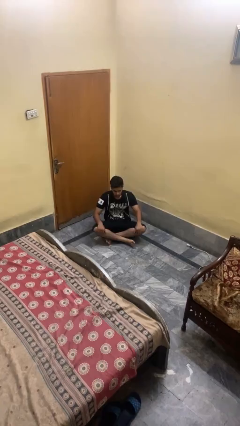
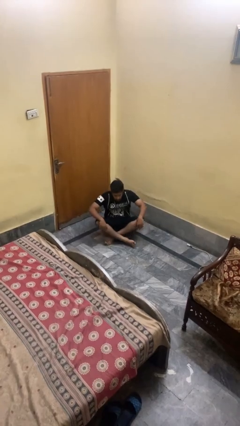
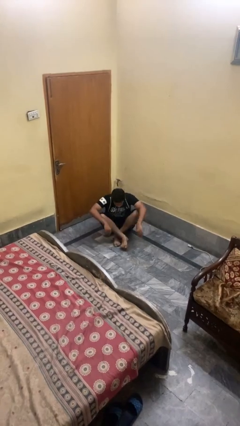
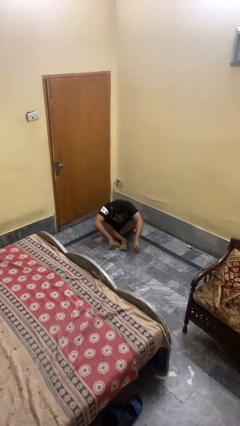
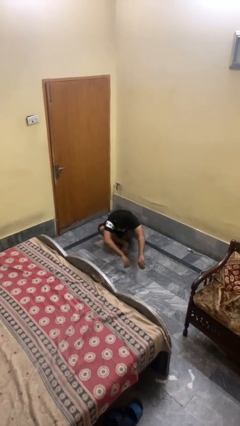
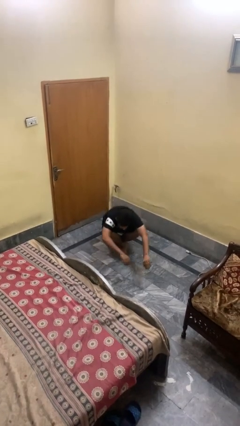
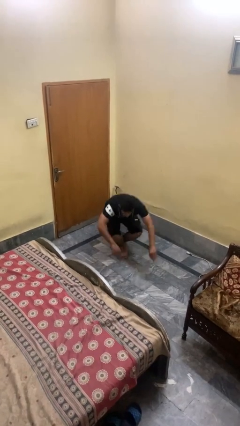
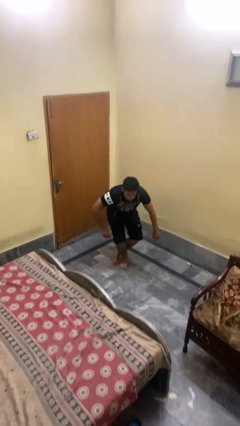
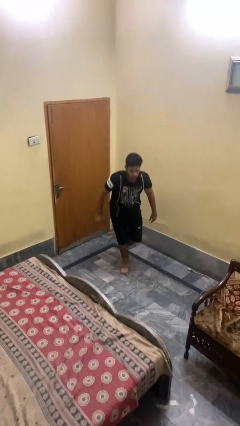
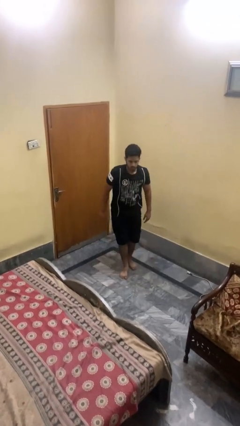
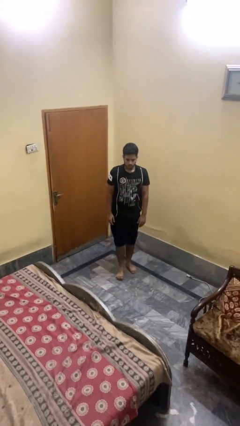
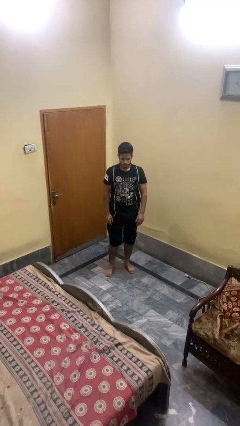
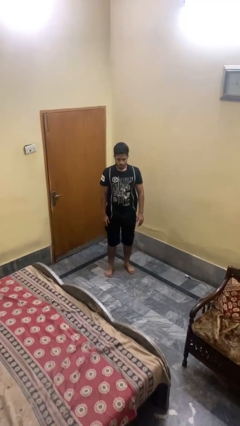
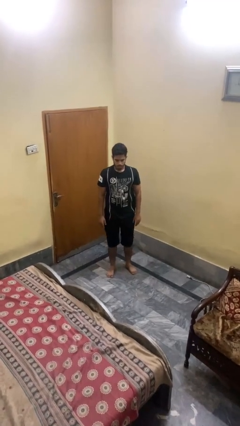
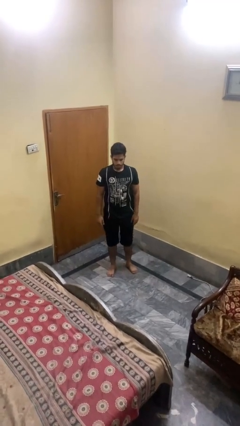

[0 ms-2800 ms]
person stands up from floor

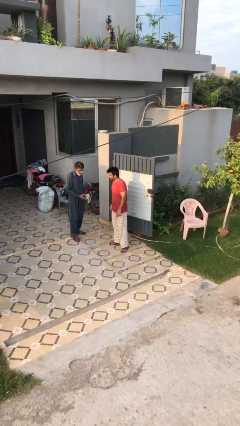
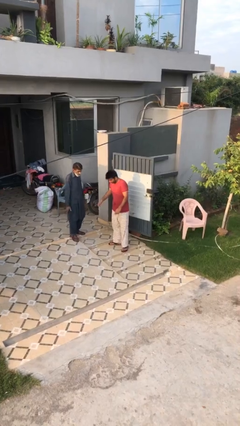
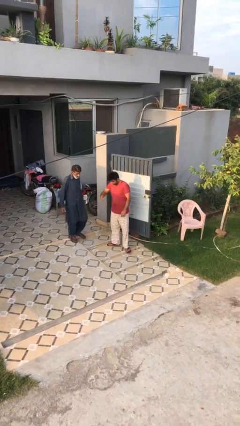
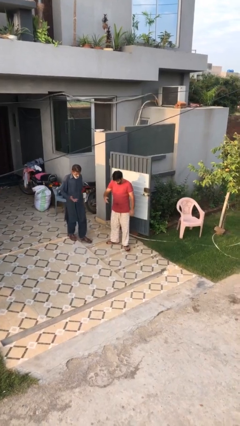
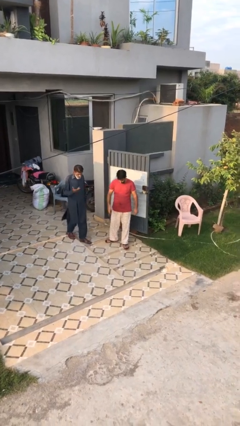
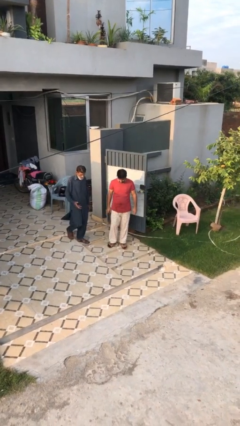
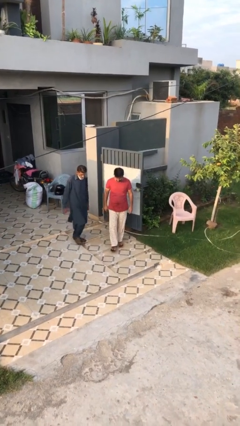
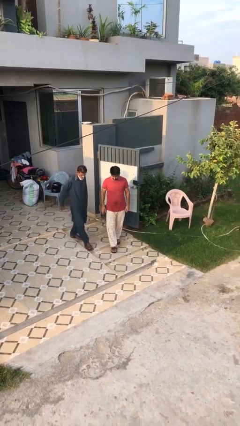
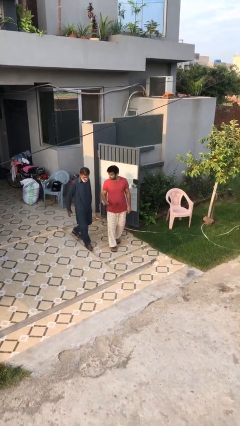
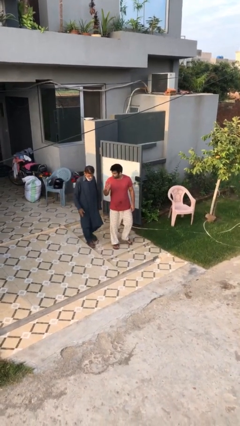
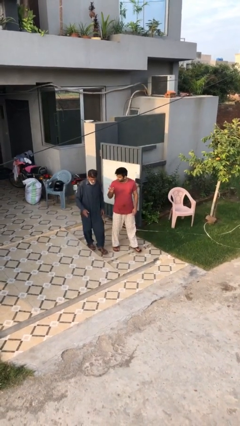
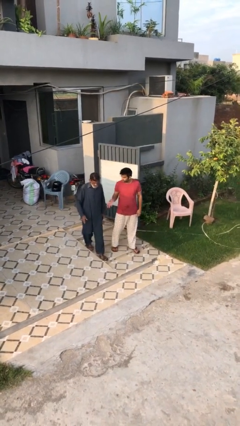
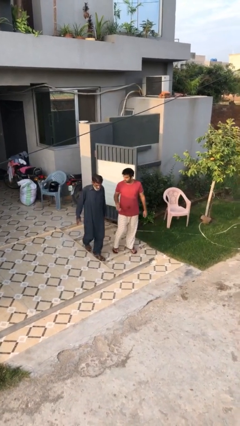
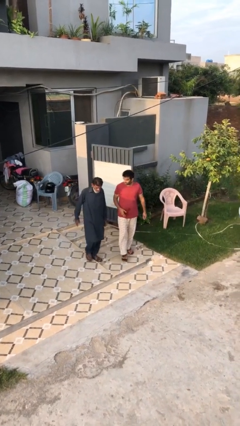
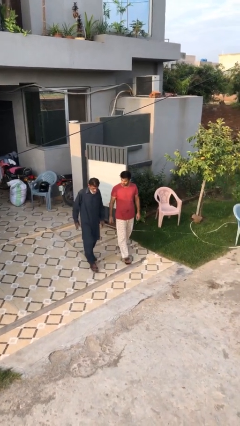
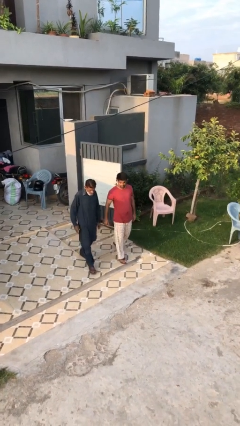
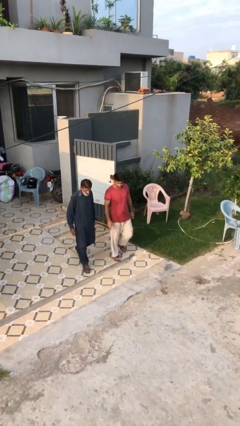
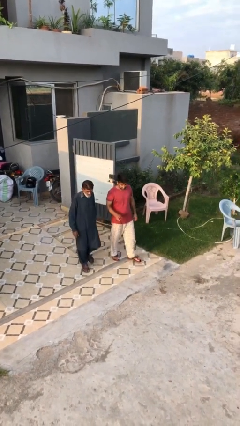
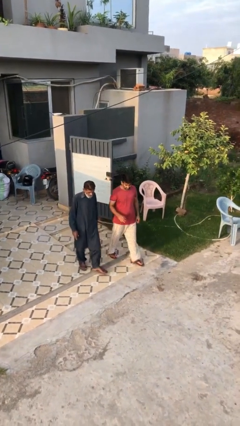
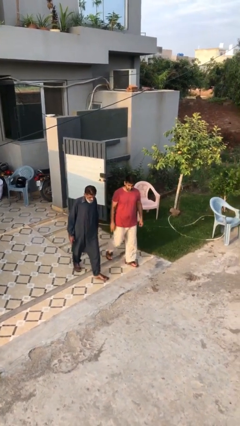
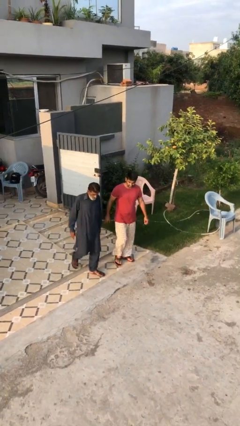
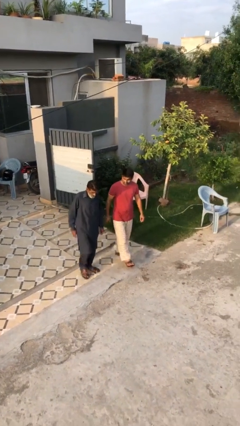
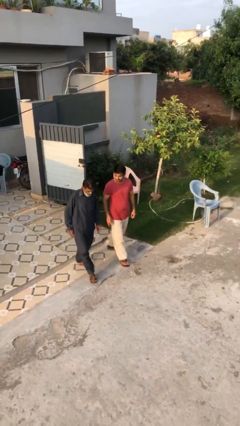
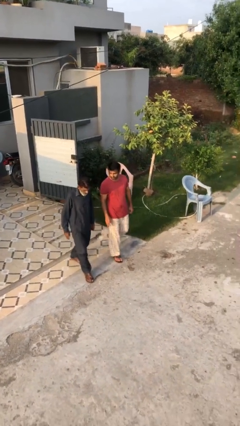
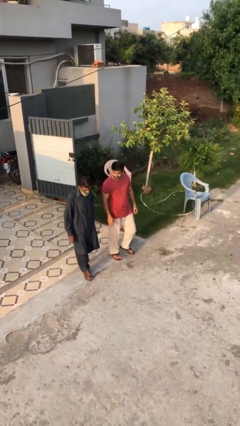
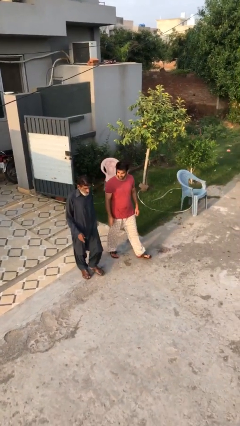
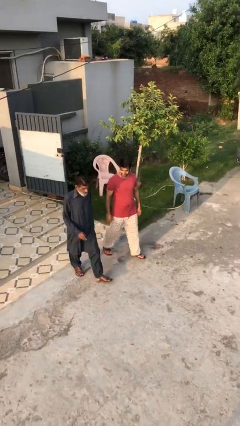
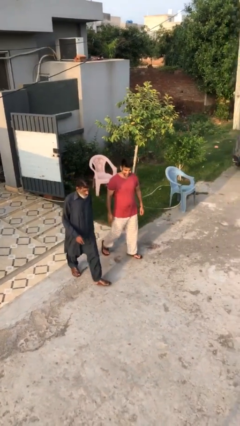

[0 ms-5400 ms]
person talks to person

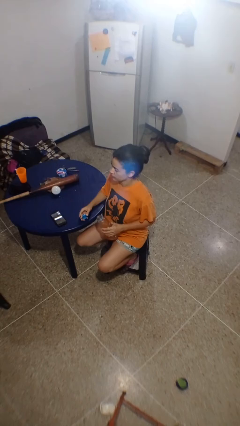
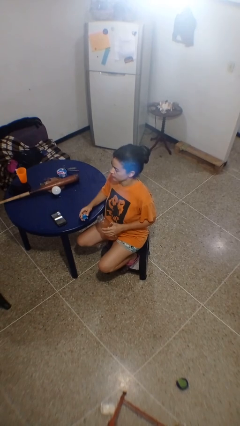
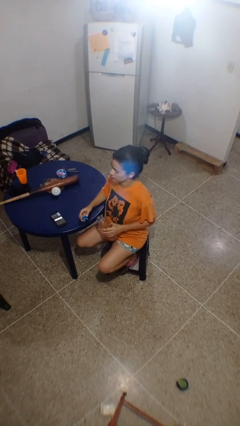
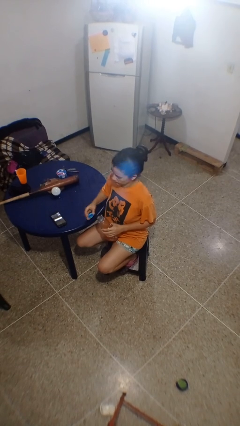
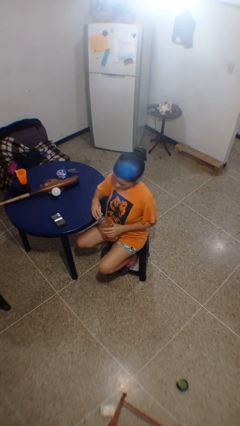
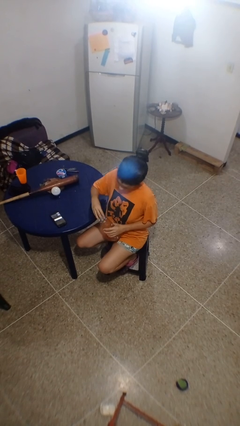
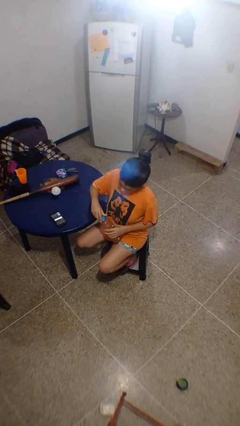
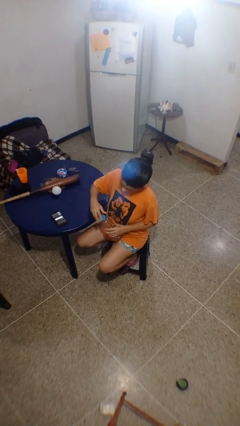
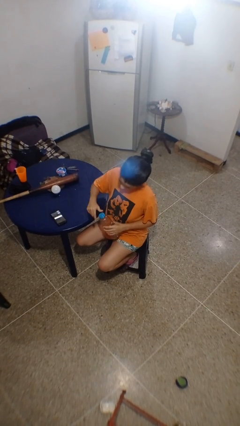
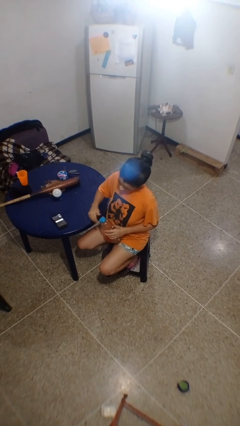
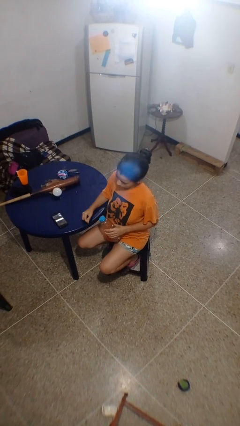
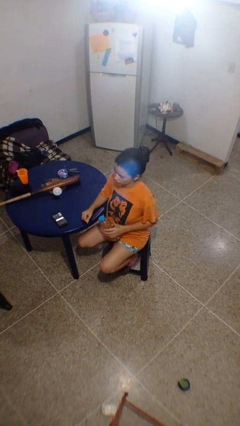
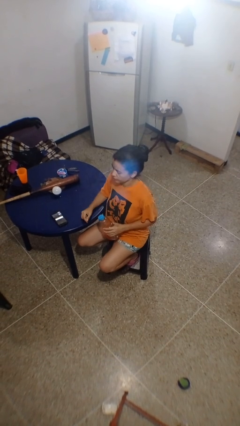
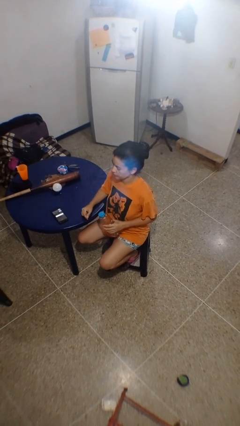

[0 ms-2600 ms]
person screws lid to bottle

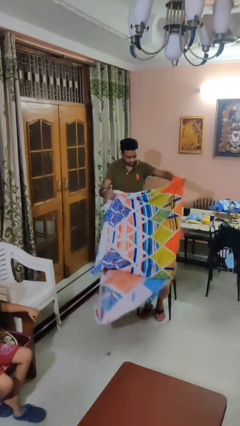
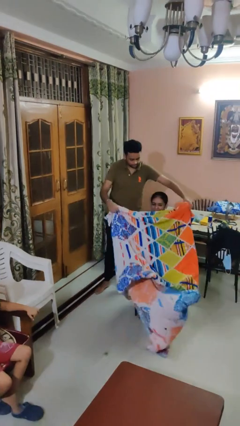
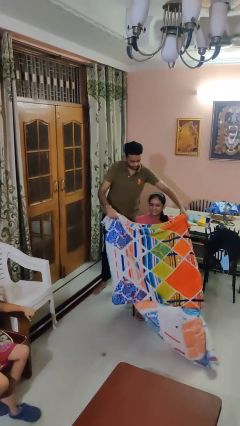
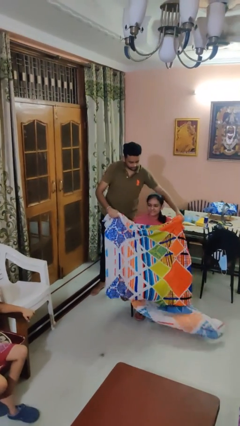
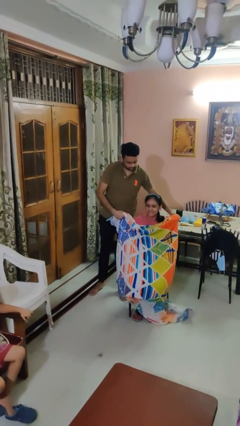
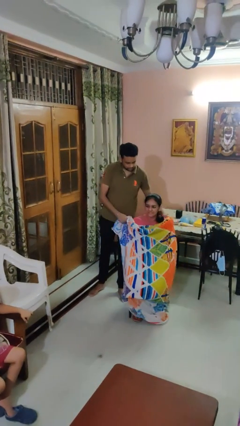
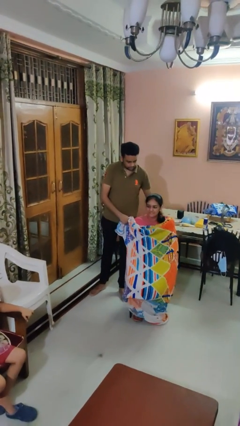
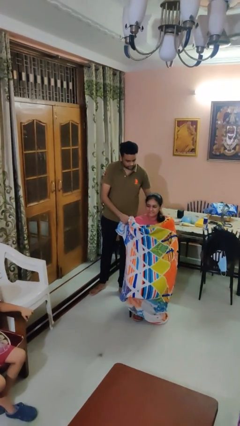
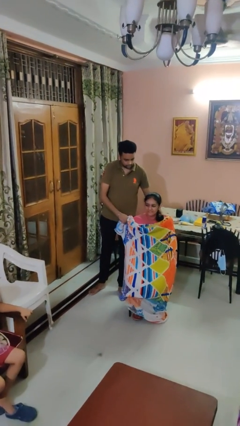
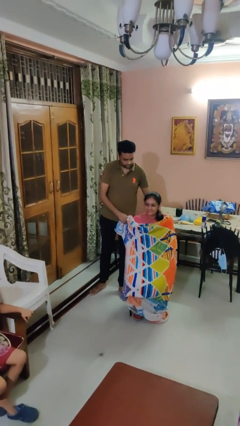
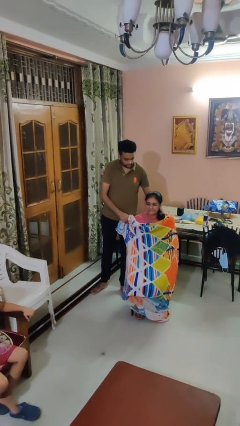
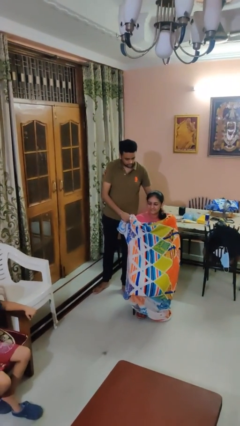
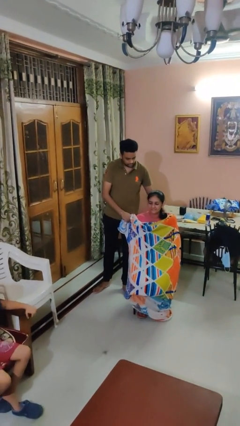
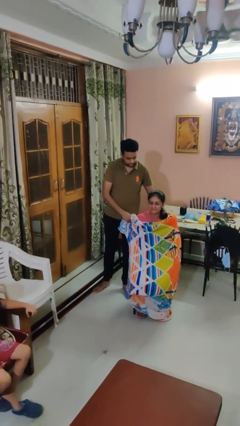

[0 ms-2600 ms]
person covers friend with blanket

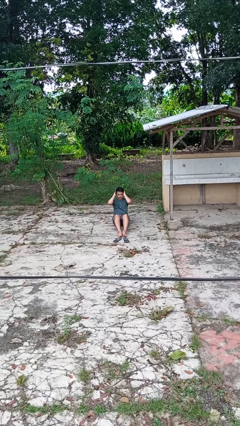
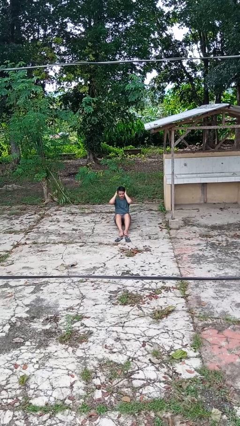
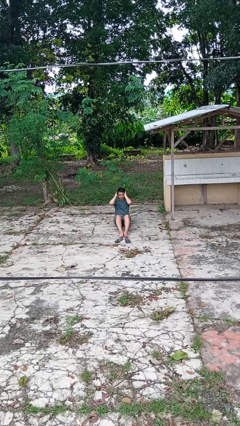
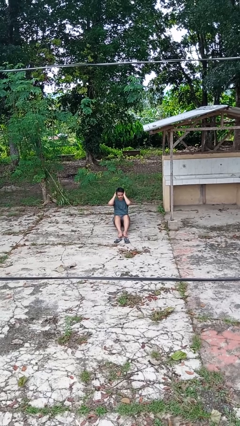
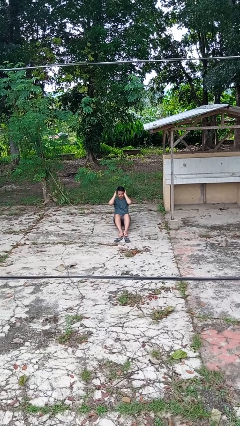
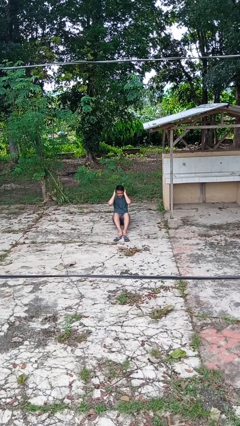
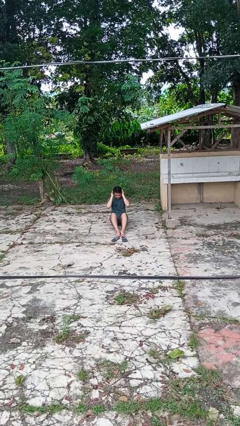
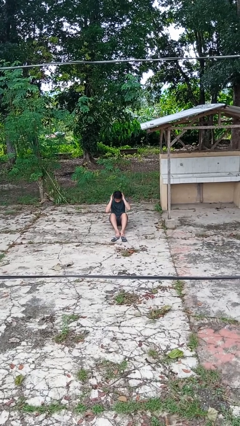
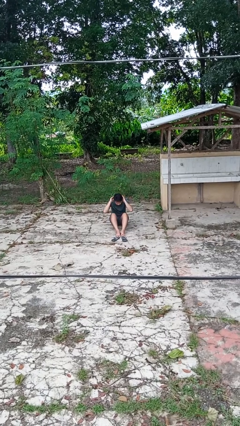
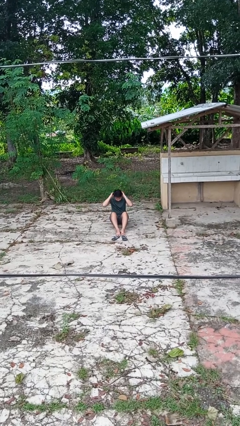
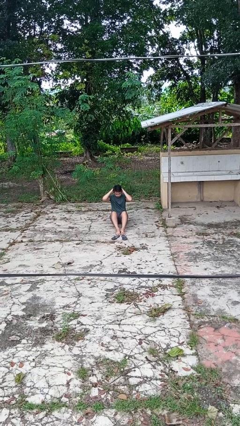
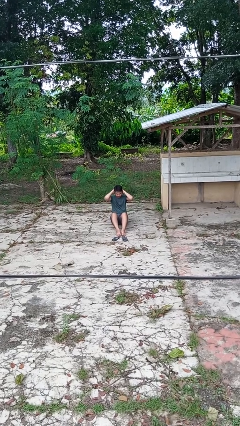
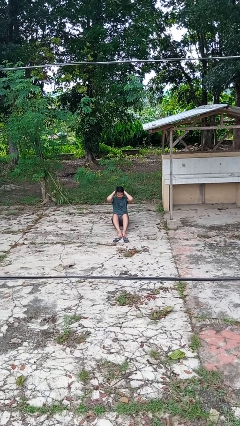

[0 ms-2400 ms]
person exercises with situp

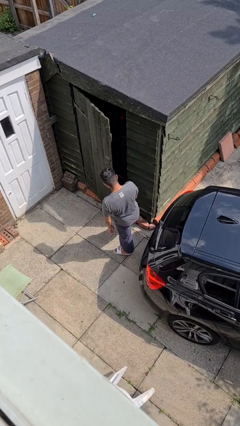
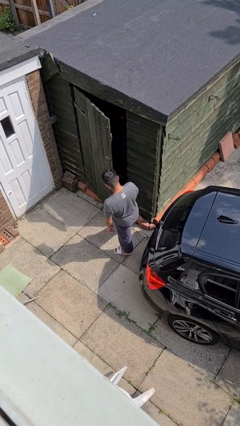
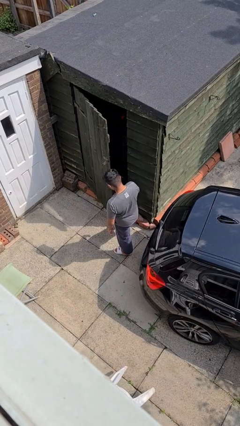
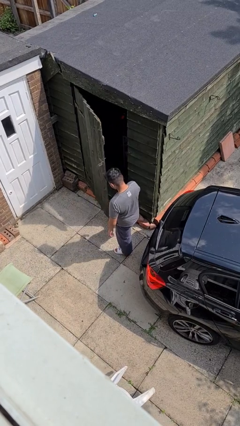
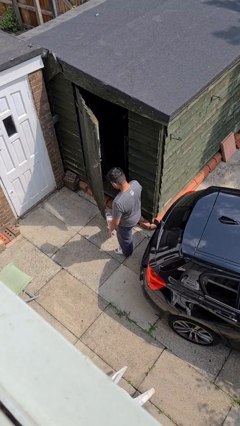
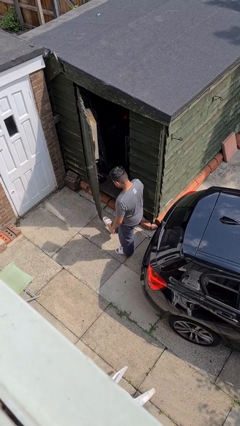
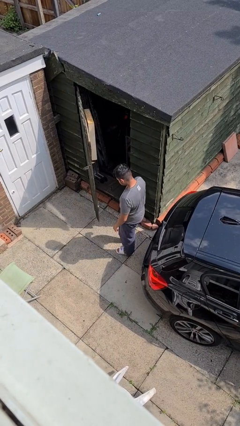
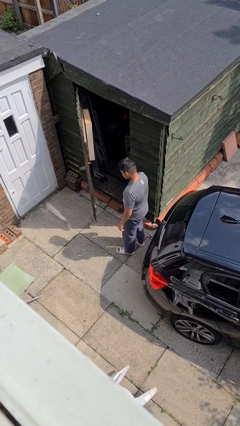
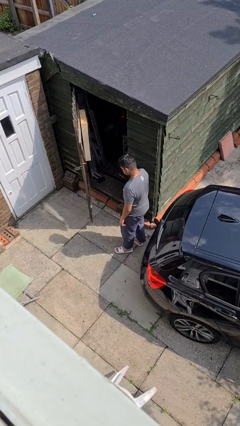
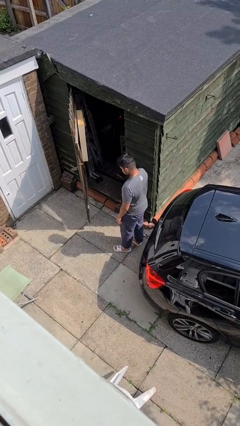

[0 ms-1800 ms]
person opens facility door
